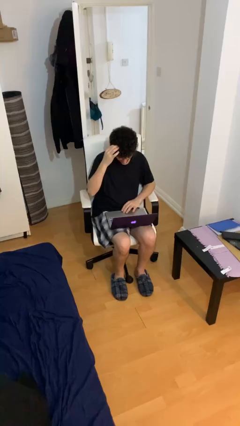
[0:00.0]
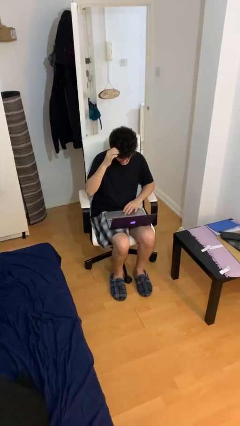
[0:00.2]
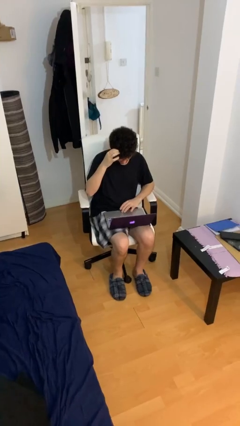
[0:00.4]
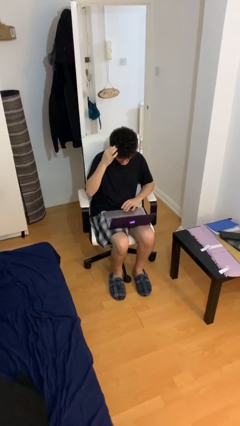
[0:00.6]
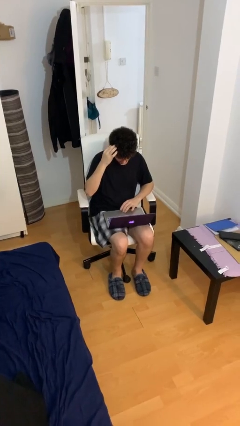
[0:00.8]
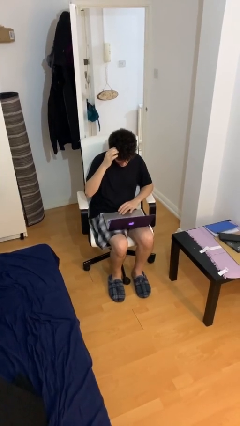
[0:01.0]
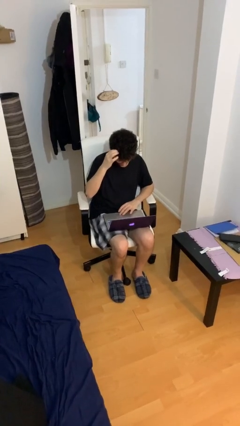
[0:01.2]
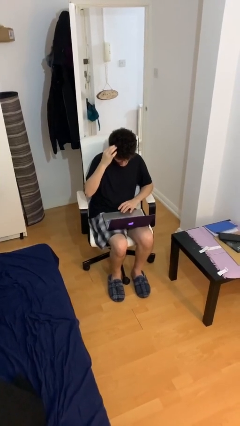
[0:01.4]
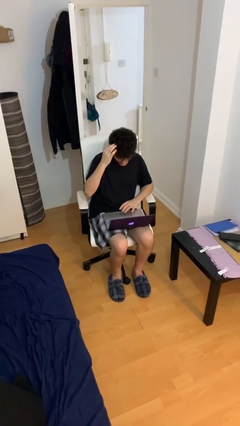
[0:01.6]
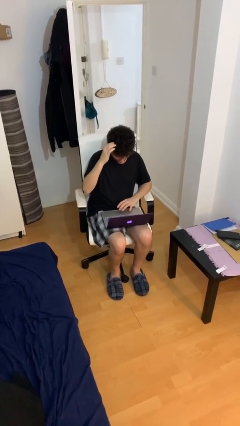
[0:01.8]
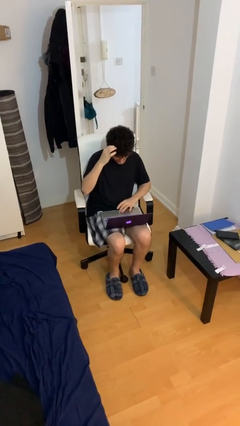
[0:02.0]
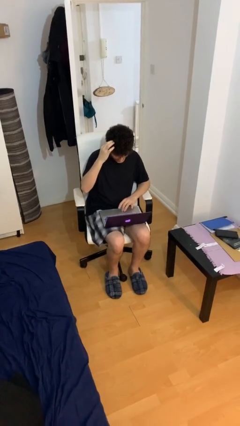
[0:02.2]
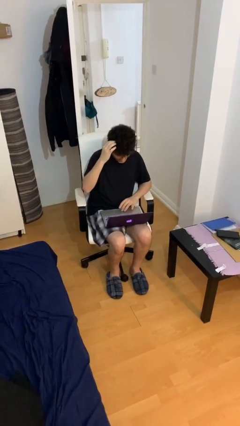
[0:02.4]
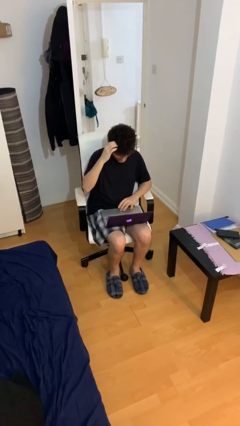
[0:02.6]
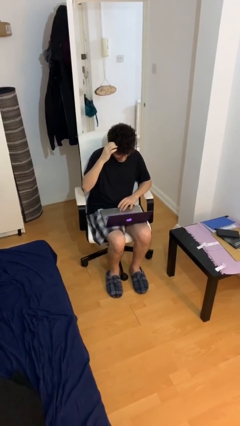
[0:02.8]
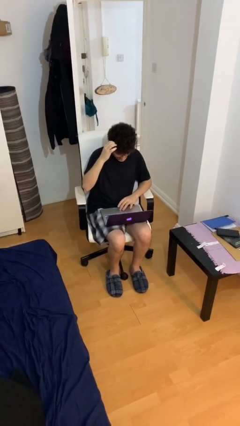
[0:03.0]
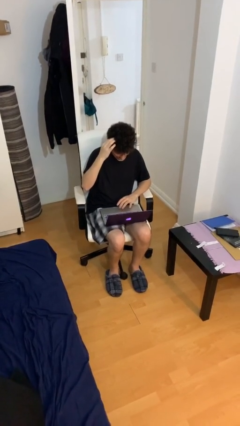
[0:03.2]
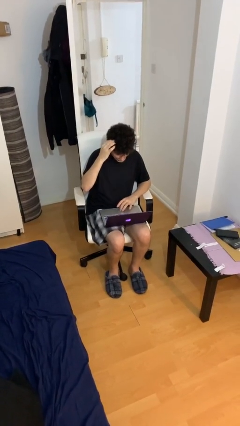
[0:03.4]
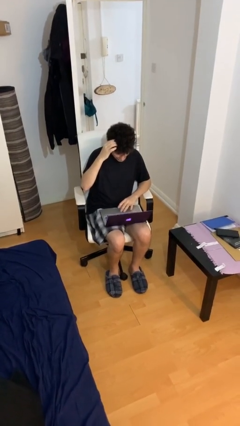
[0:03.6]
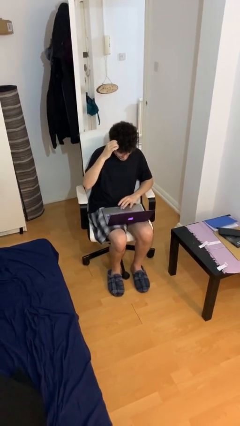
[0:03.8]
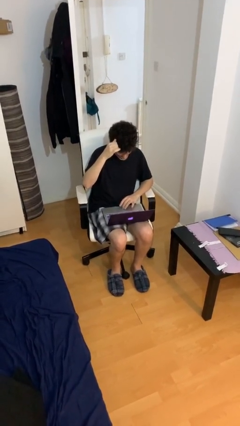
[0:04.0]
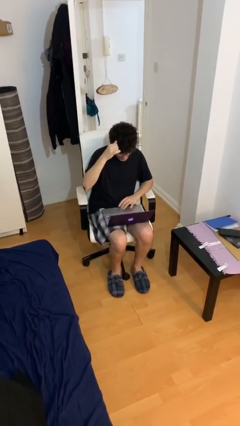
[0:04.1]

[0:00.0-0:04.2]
person interacts with laptop

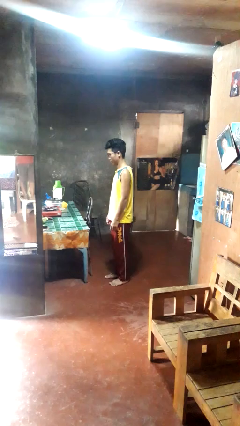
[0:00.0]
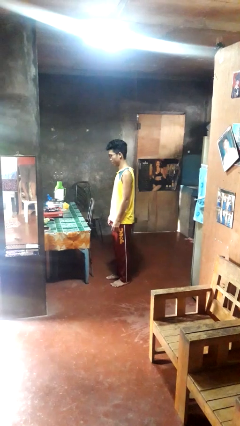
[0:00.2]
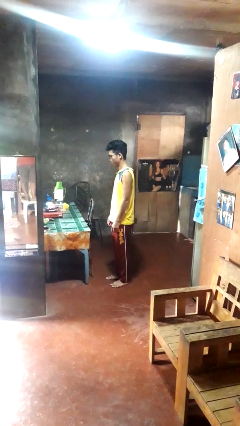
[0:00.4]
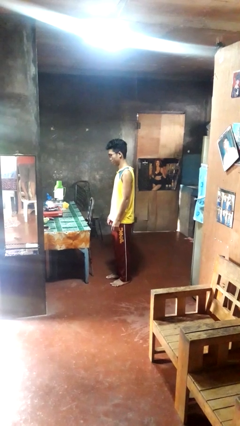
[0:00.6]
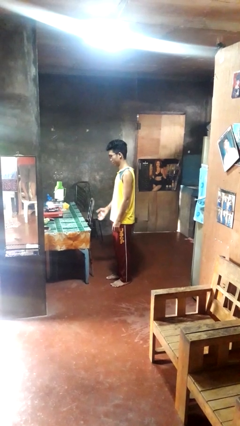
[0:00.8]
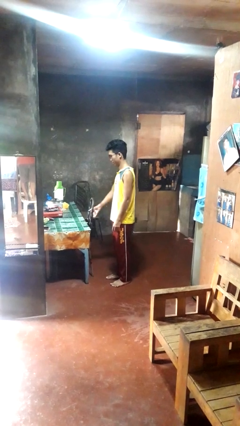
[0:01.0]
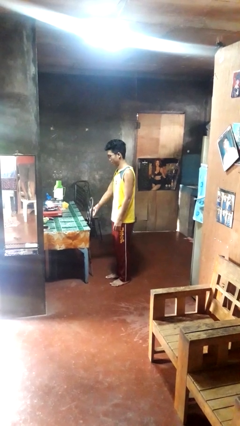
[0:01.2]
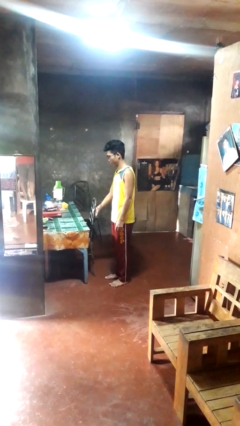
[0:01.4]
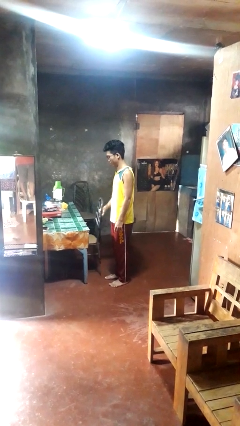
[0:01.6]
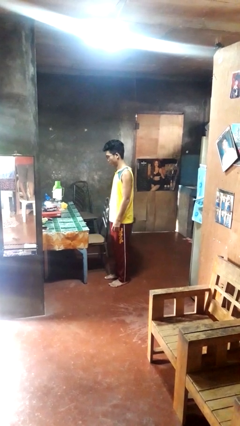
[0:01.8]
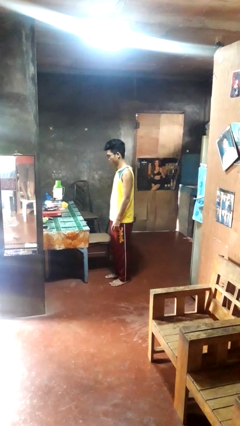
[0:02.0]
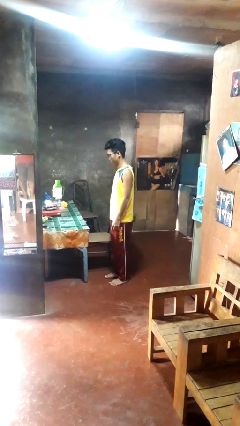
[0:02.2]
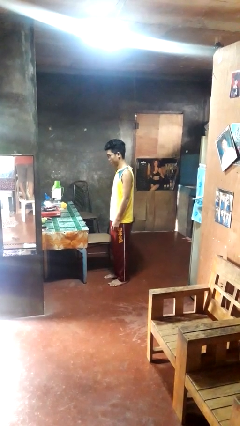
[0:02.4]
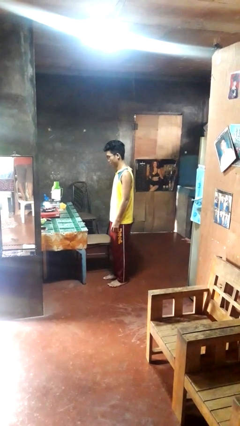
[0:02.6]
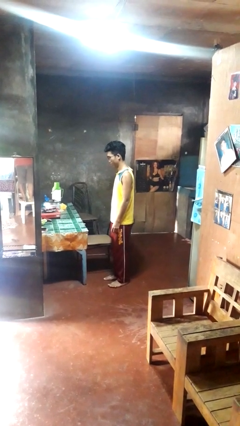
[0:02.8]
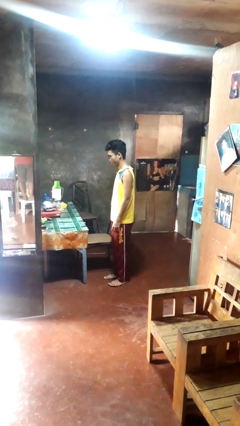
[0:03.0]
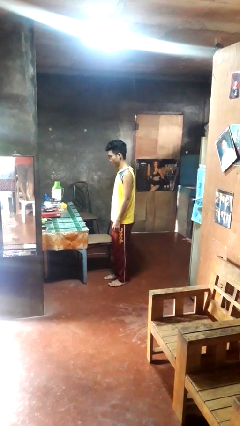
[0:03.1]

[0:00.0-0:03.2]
person pulls out chair

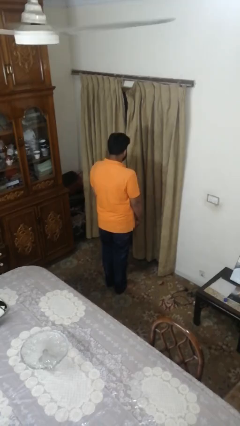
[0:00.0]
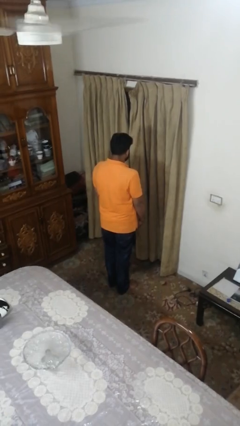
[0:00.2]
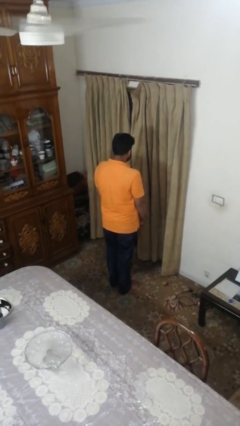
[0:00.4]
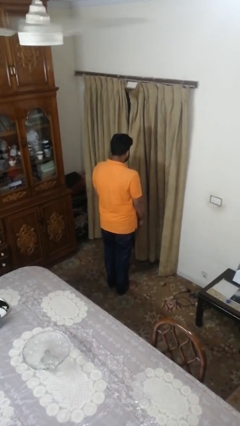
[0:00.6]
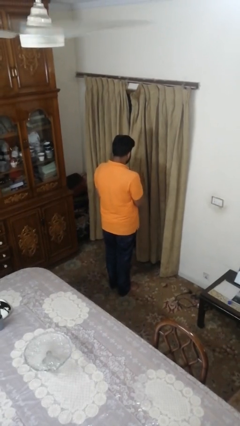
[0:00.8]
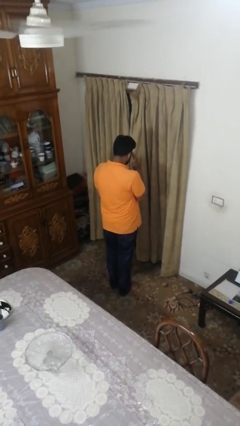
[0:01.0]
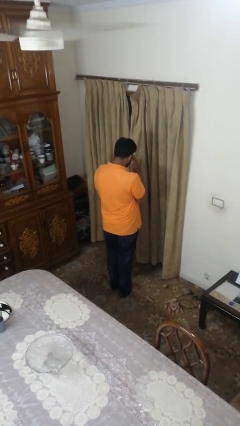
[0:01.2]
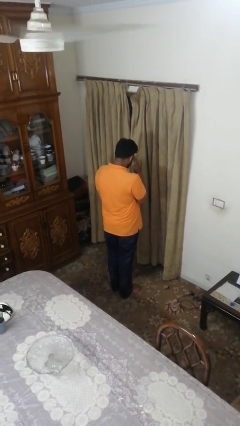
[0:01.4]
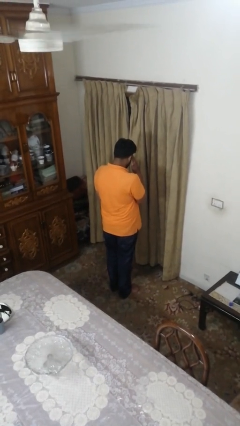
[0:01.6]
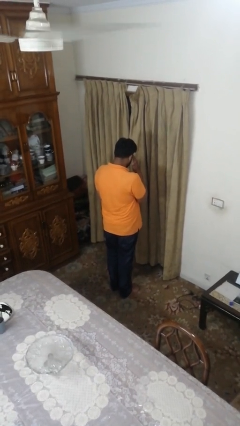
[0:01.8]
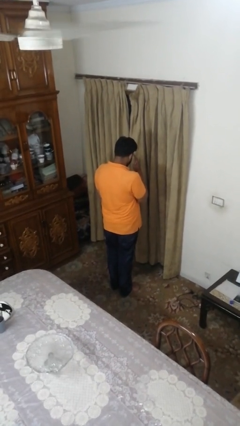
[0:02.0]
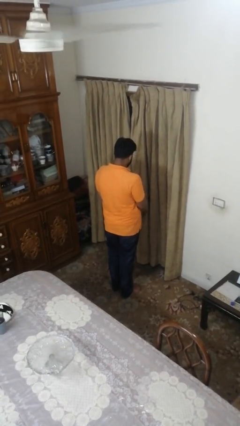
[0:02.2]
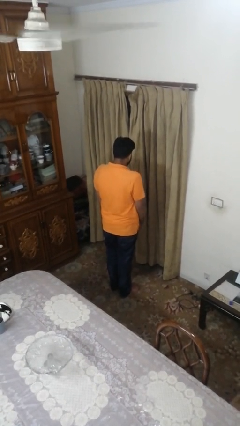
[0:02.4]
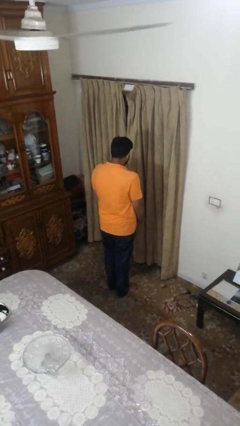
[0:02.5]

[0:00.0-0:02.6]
person salutes

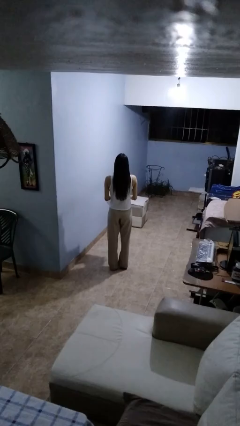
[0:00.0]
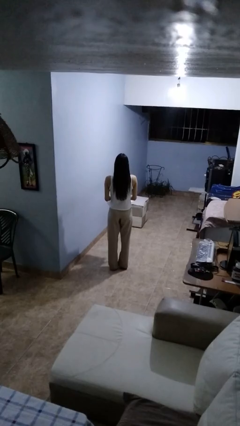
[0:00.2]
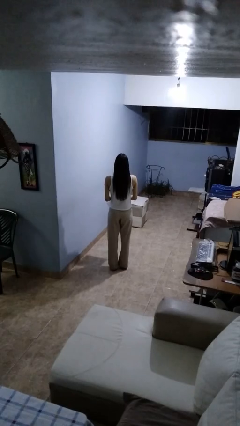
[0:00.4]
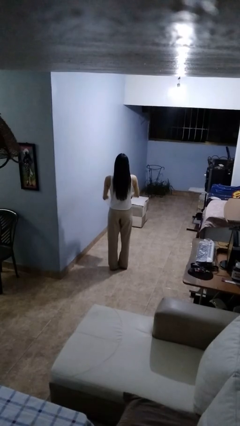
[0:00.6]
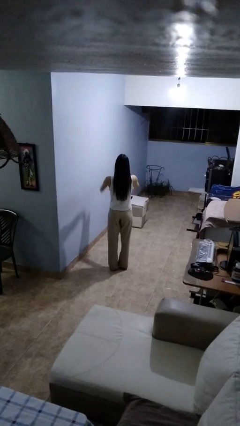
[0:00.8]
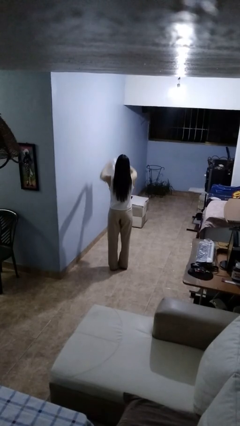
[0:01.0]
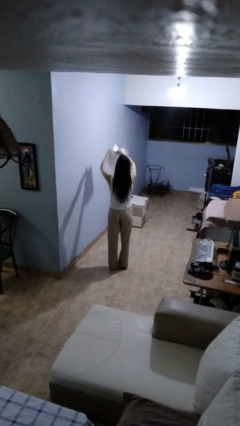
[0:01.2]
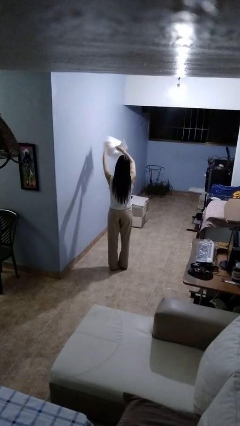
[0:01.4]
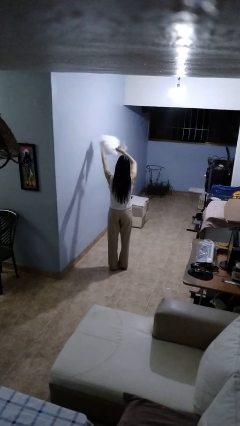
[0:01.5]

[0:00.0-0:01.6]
person tears paper

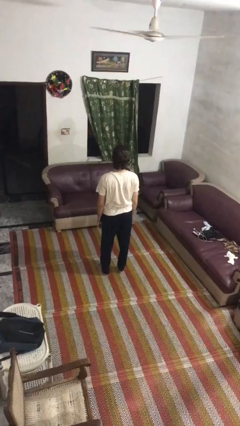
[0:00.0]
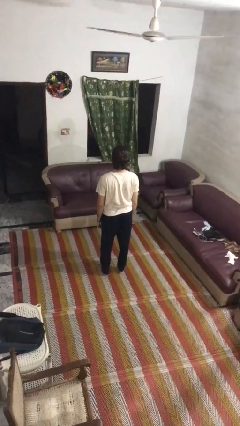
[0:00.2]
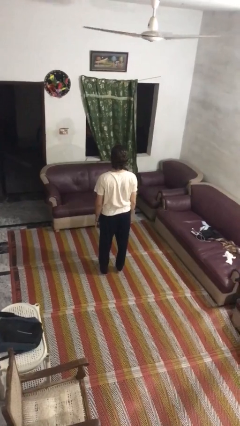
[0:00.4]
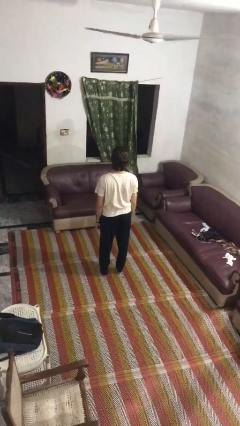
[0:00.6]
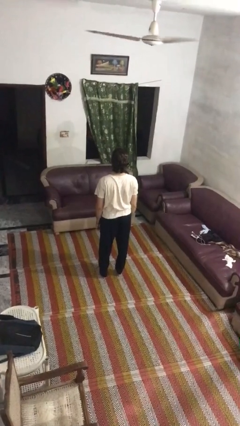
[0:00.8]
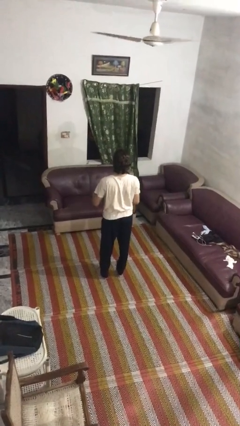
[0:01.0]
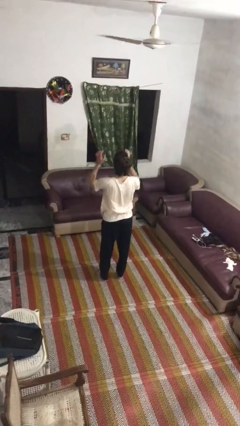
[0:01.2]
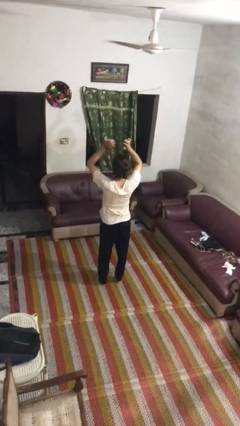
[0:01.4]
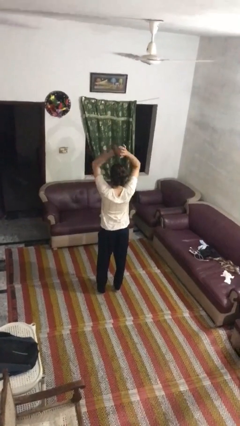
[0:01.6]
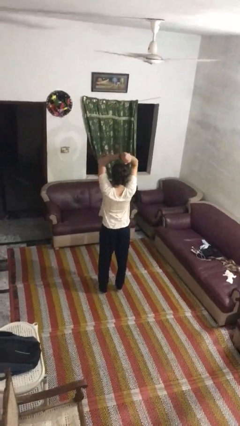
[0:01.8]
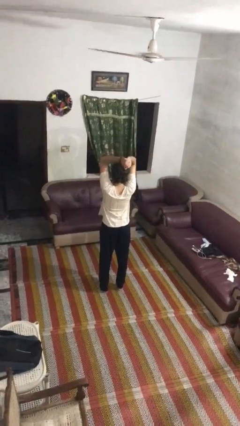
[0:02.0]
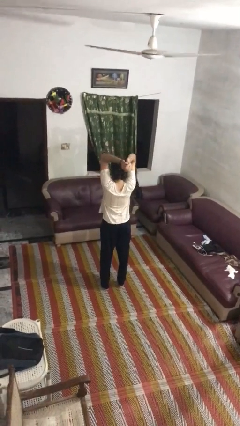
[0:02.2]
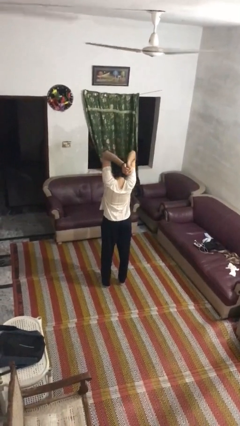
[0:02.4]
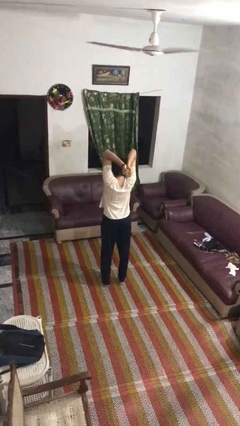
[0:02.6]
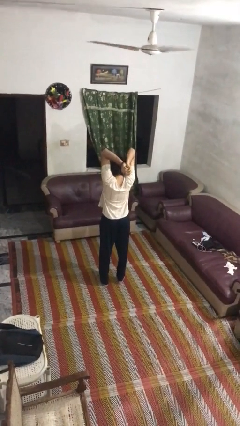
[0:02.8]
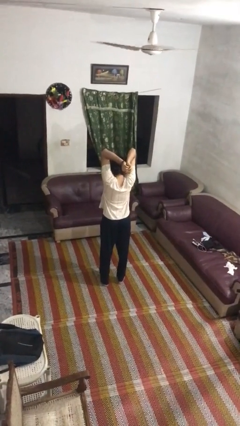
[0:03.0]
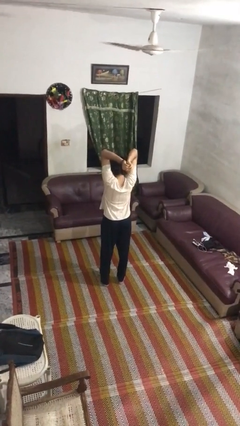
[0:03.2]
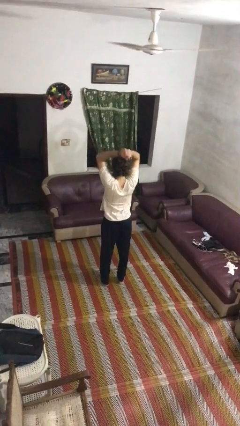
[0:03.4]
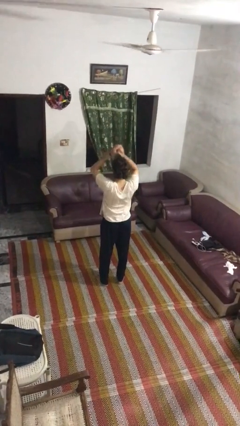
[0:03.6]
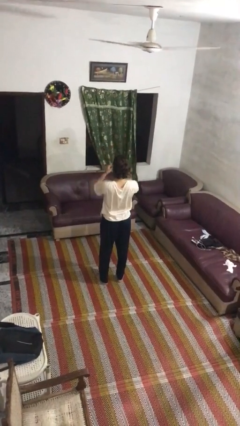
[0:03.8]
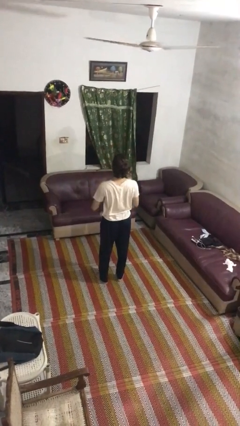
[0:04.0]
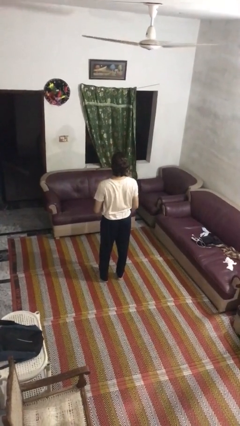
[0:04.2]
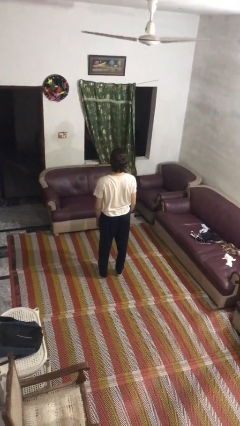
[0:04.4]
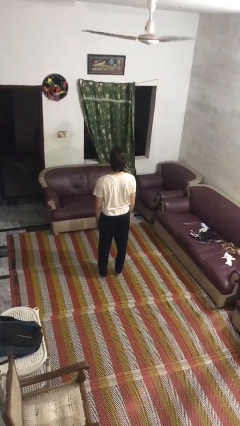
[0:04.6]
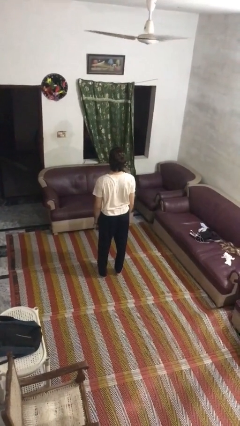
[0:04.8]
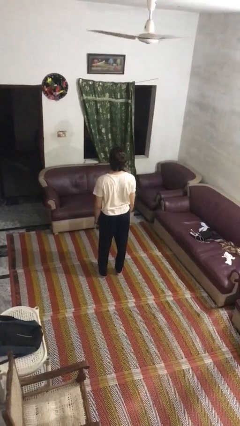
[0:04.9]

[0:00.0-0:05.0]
person stretches arms over head

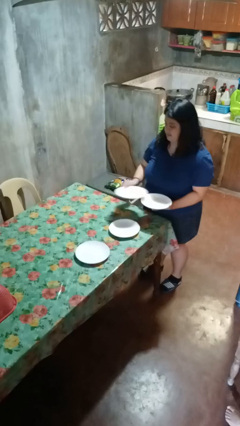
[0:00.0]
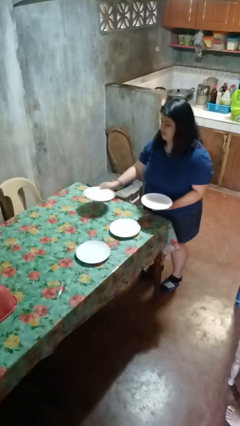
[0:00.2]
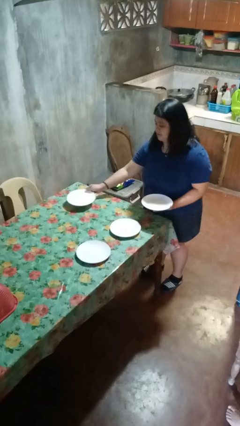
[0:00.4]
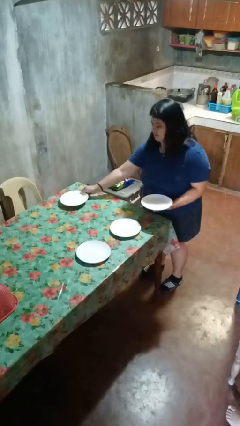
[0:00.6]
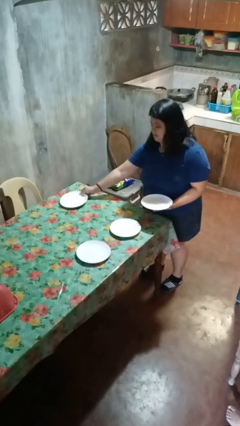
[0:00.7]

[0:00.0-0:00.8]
person sets table
